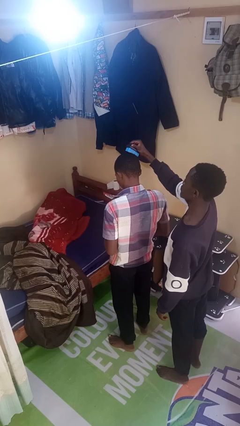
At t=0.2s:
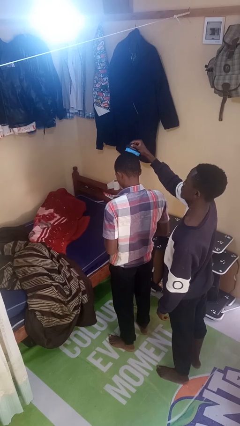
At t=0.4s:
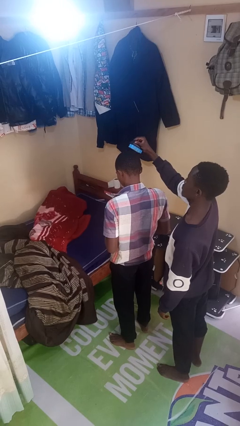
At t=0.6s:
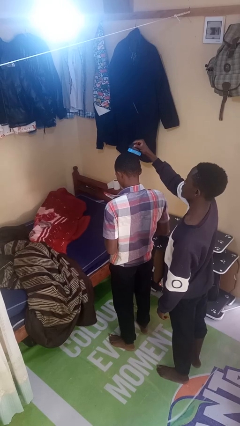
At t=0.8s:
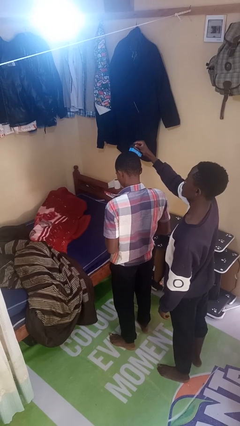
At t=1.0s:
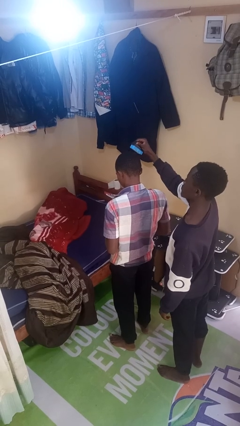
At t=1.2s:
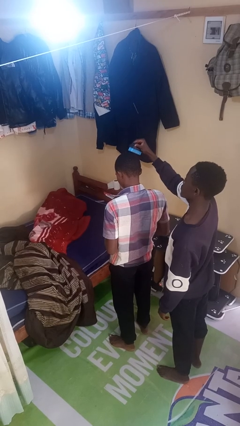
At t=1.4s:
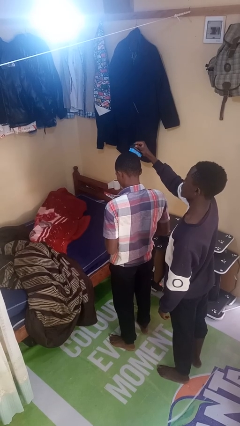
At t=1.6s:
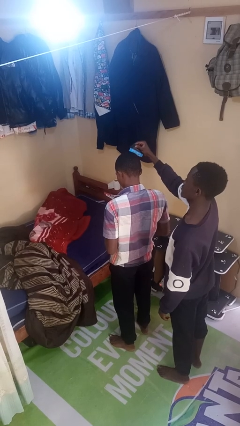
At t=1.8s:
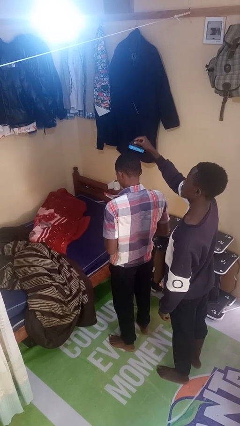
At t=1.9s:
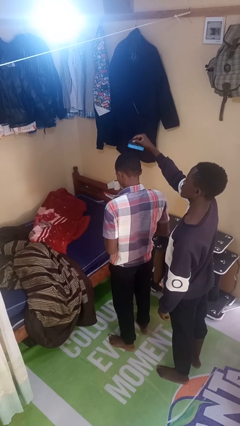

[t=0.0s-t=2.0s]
person brushes hair of person

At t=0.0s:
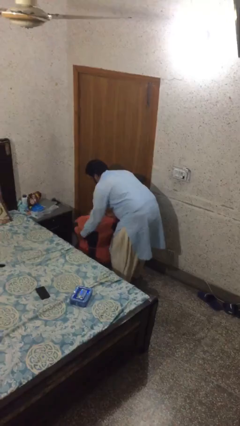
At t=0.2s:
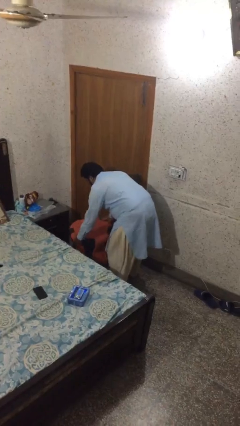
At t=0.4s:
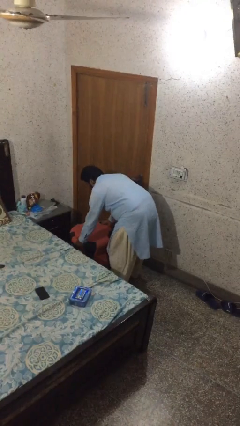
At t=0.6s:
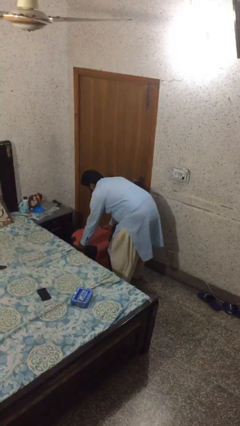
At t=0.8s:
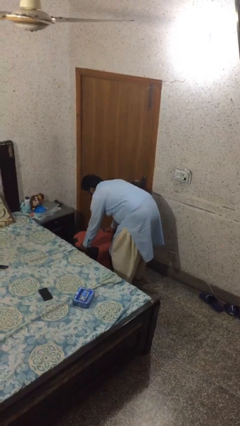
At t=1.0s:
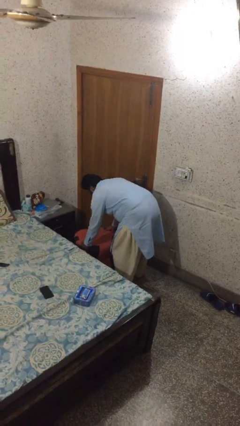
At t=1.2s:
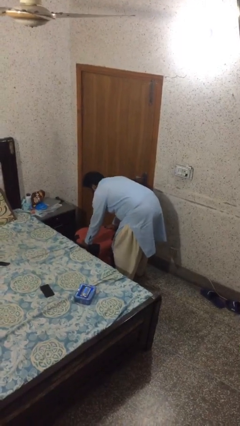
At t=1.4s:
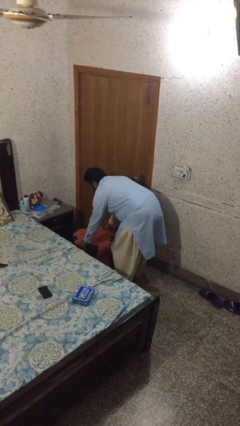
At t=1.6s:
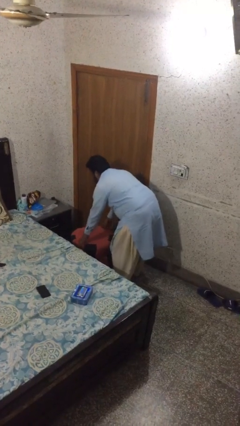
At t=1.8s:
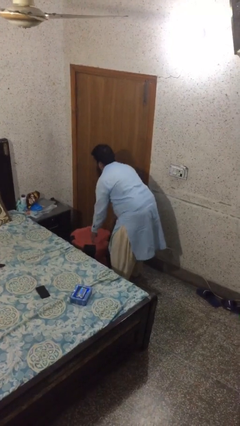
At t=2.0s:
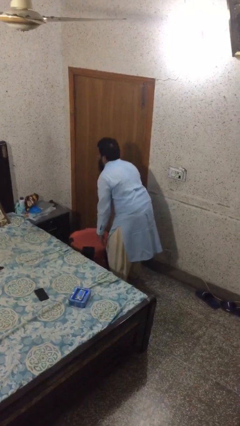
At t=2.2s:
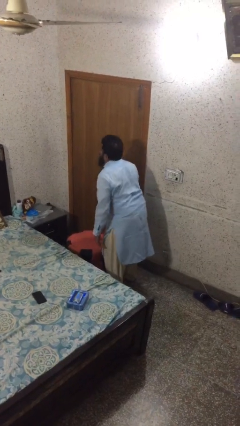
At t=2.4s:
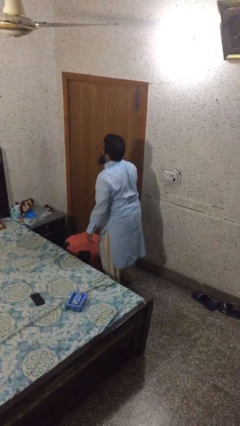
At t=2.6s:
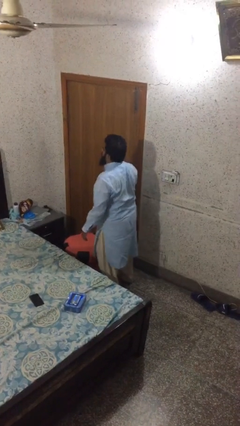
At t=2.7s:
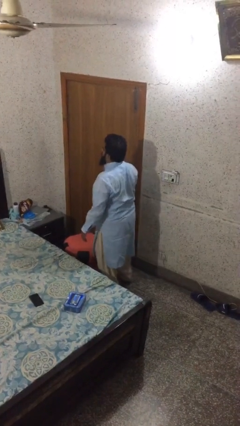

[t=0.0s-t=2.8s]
person puts down object on floor

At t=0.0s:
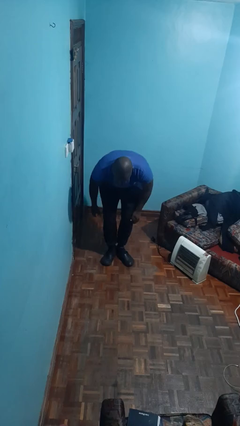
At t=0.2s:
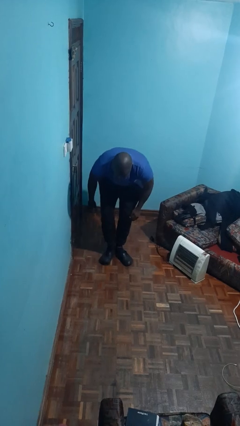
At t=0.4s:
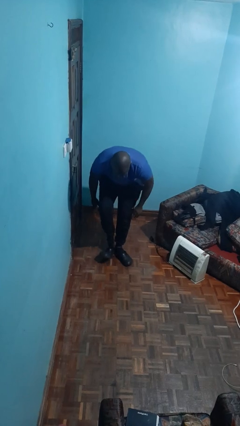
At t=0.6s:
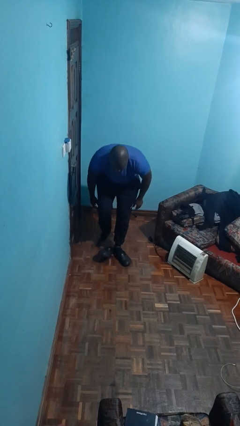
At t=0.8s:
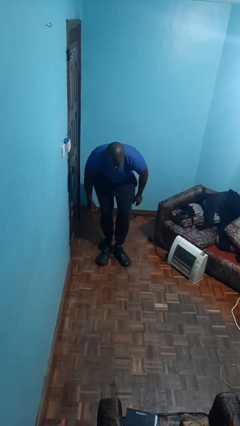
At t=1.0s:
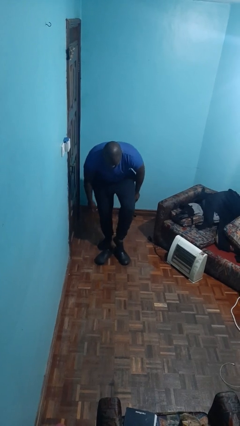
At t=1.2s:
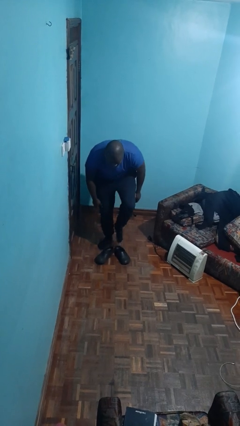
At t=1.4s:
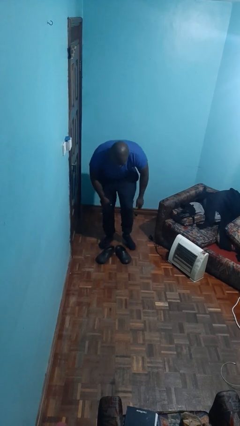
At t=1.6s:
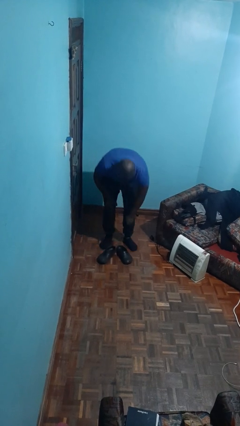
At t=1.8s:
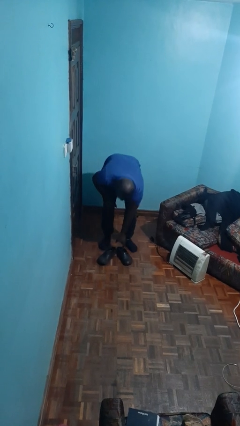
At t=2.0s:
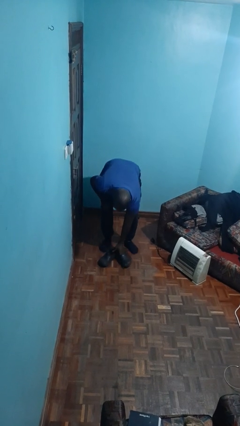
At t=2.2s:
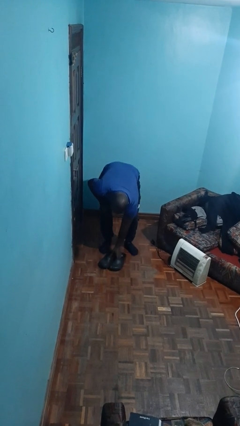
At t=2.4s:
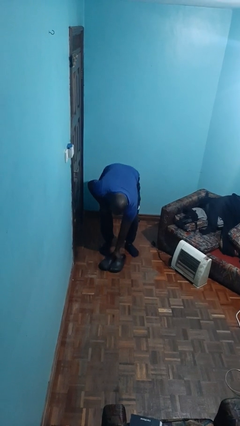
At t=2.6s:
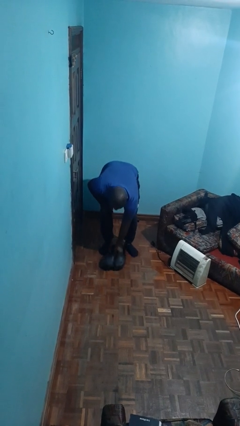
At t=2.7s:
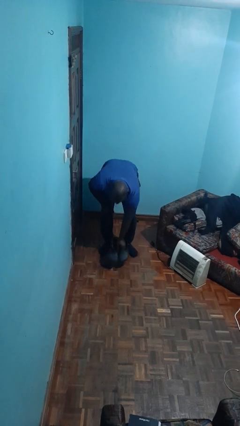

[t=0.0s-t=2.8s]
person takes off shoes

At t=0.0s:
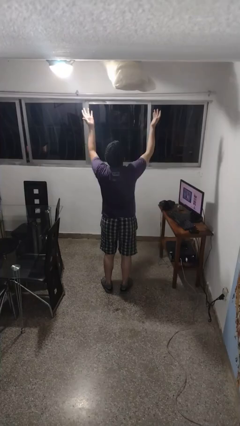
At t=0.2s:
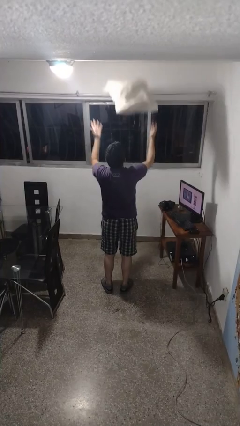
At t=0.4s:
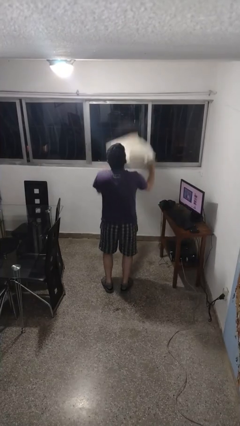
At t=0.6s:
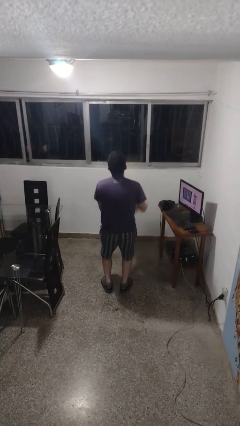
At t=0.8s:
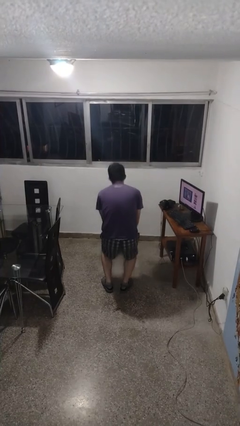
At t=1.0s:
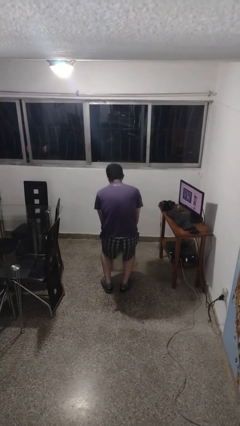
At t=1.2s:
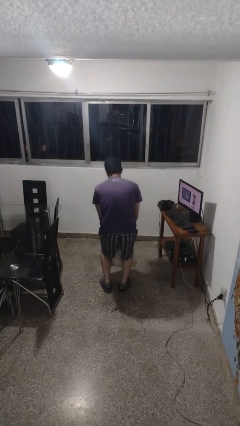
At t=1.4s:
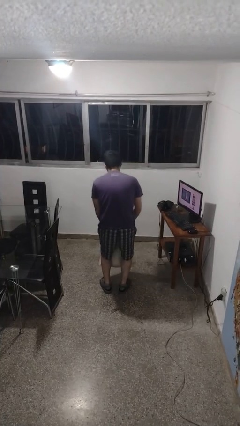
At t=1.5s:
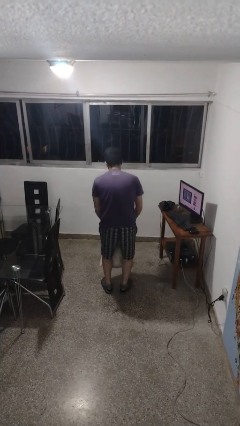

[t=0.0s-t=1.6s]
person catches dropped object

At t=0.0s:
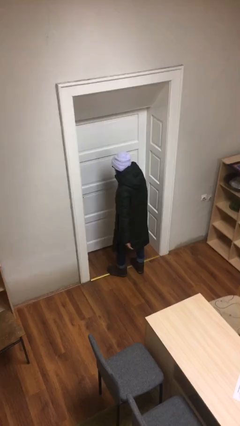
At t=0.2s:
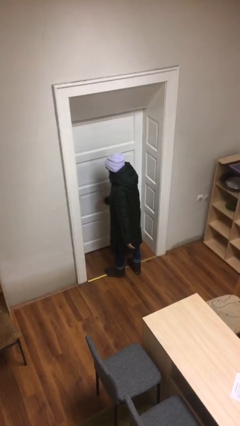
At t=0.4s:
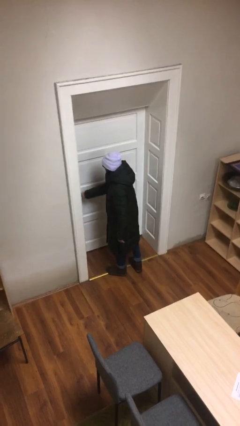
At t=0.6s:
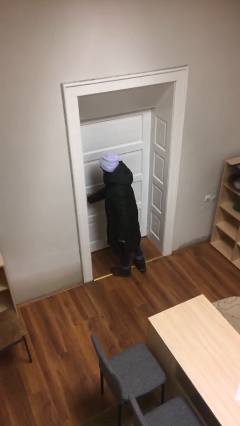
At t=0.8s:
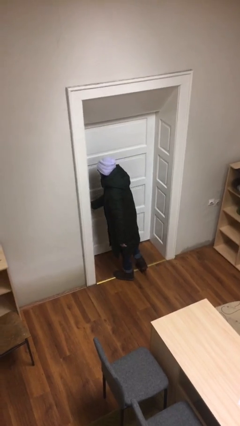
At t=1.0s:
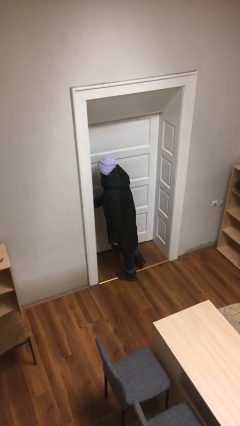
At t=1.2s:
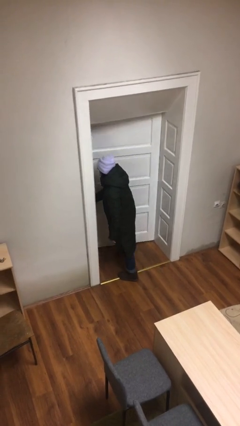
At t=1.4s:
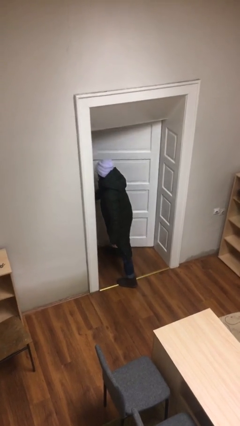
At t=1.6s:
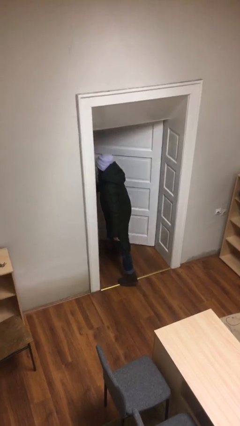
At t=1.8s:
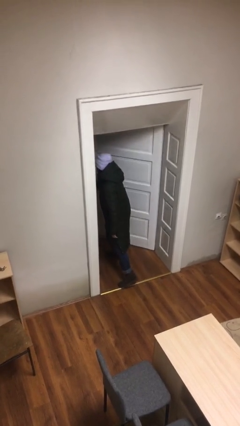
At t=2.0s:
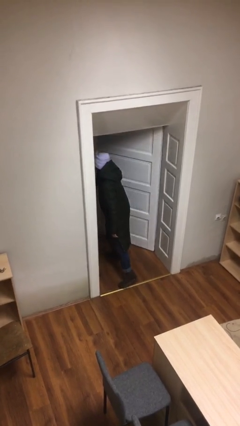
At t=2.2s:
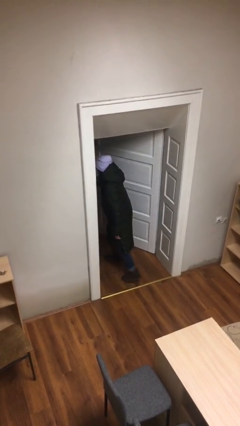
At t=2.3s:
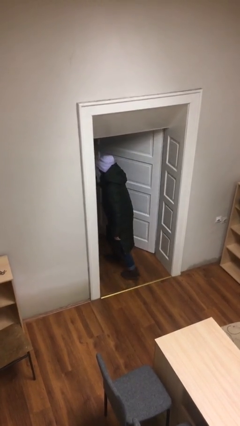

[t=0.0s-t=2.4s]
person opens facility door

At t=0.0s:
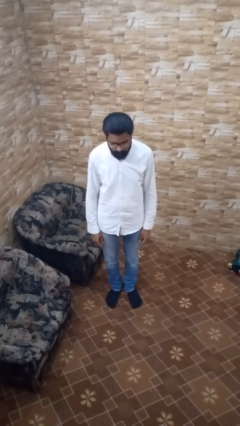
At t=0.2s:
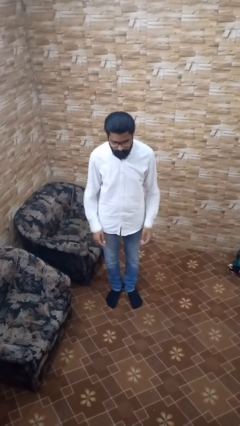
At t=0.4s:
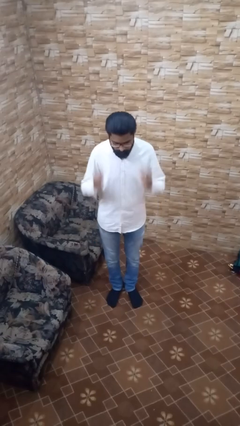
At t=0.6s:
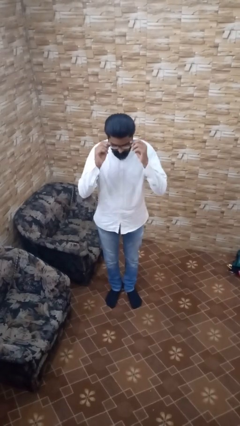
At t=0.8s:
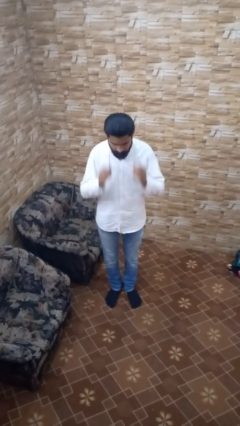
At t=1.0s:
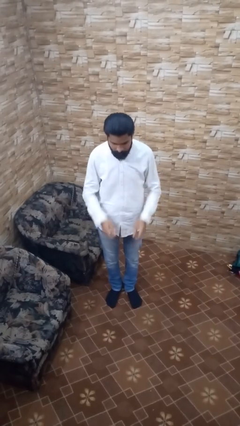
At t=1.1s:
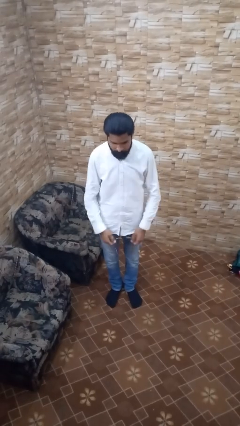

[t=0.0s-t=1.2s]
person takes off glasses

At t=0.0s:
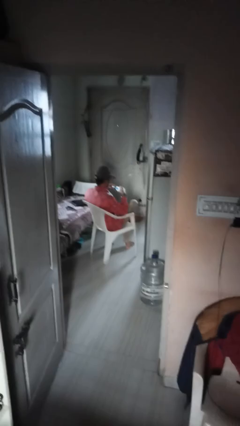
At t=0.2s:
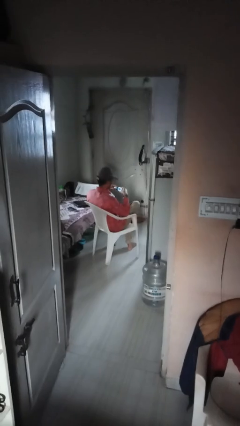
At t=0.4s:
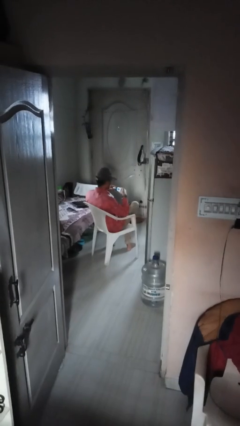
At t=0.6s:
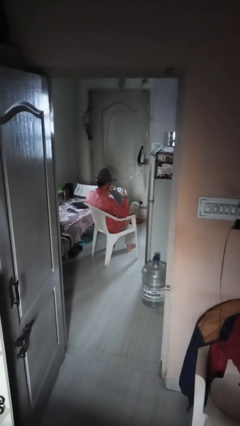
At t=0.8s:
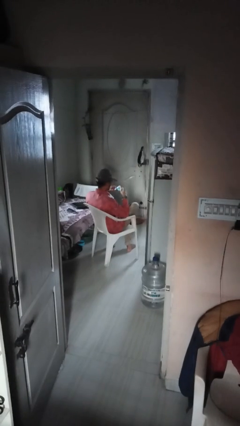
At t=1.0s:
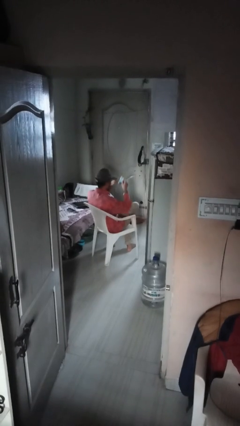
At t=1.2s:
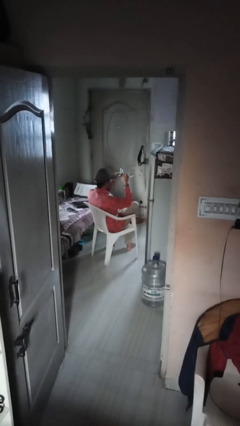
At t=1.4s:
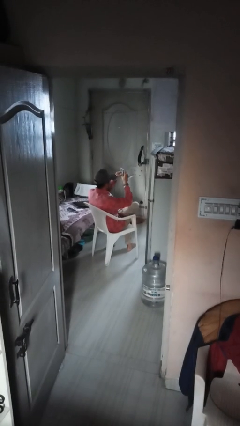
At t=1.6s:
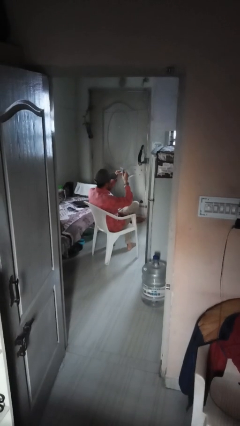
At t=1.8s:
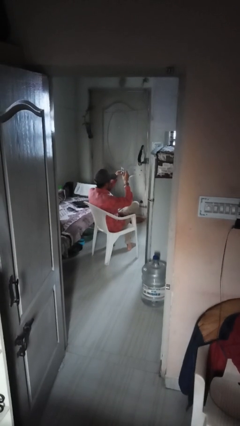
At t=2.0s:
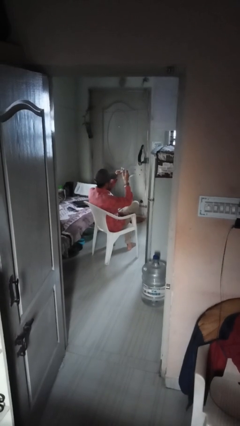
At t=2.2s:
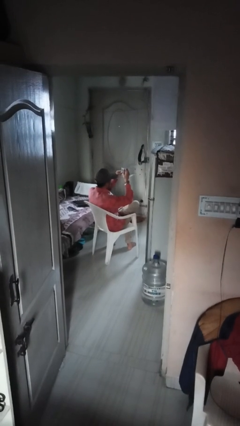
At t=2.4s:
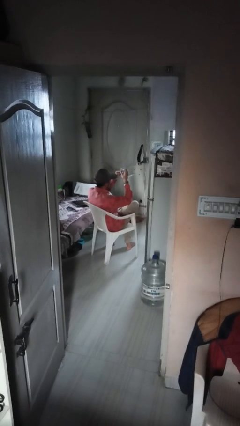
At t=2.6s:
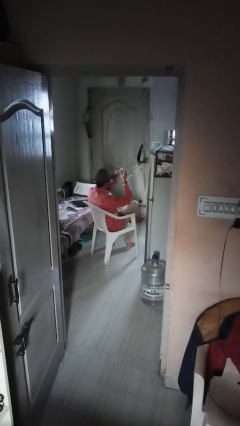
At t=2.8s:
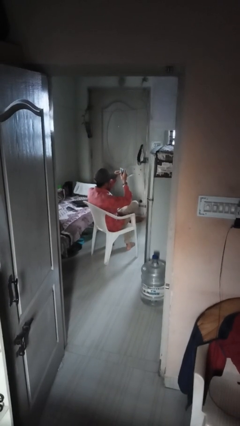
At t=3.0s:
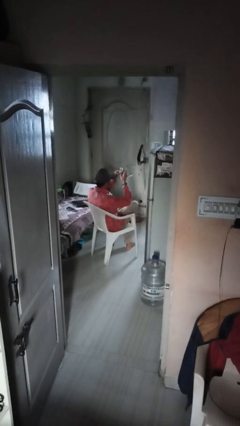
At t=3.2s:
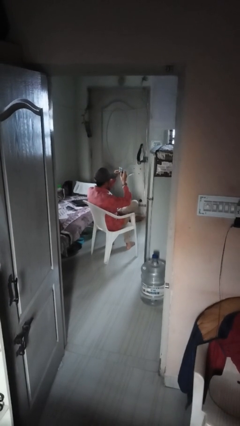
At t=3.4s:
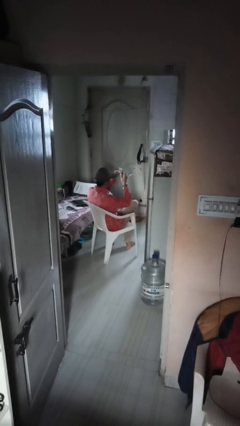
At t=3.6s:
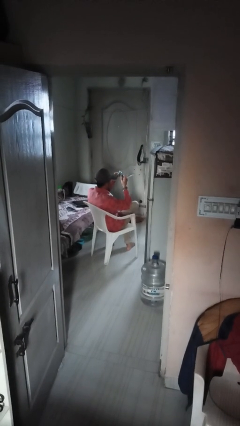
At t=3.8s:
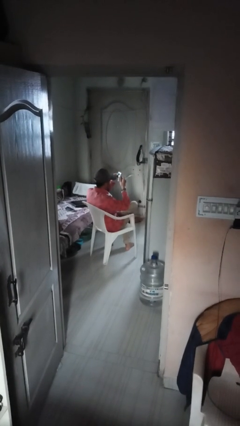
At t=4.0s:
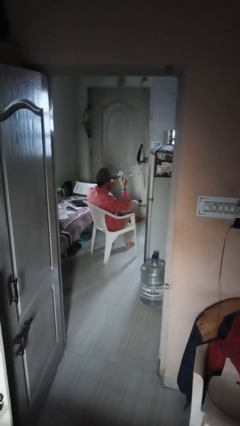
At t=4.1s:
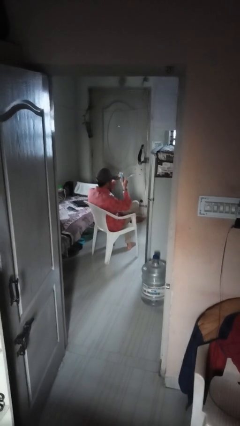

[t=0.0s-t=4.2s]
person squeezes object
